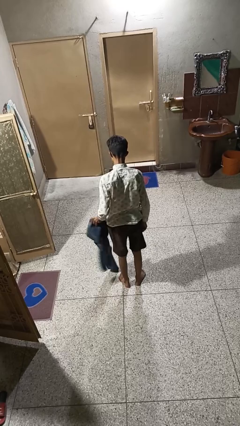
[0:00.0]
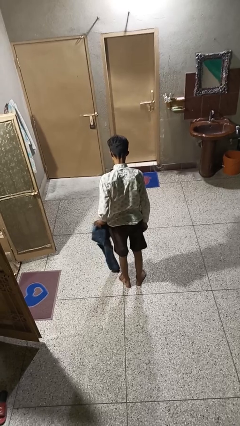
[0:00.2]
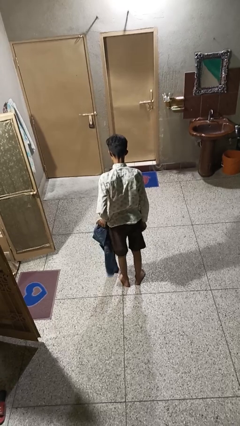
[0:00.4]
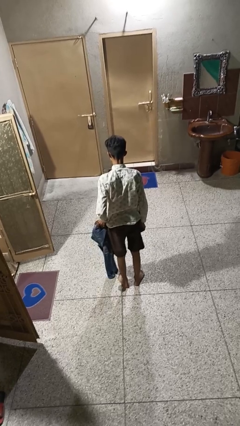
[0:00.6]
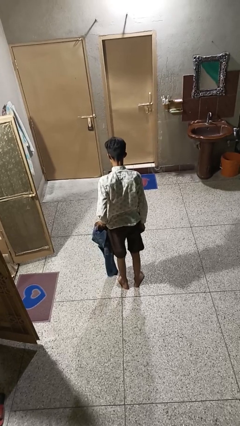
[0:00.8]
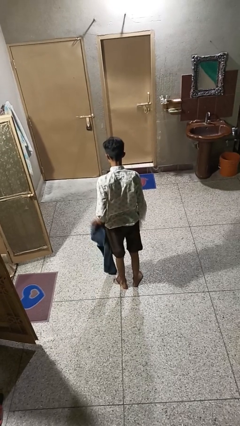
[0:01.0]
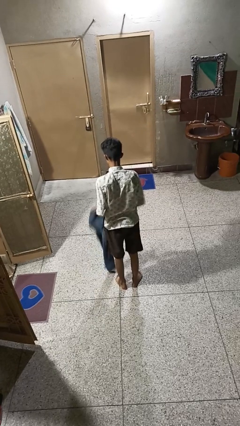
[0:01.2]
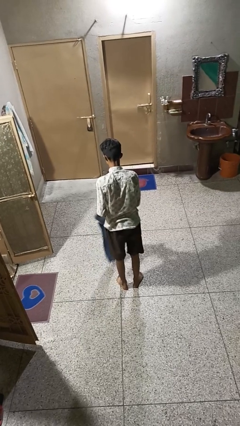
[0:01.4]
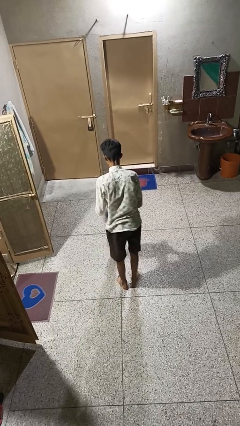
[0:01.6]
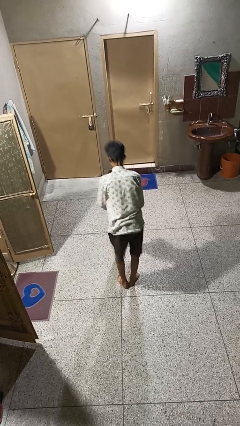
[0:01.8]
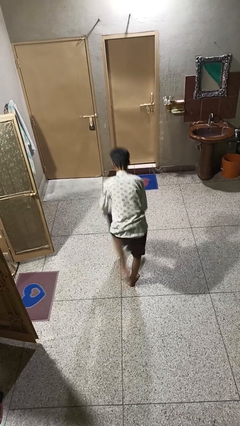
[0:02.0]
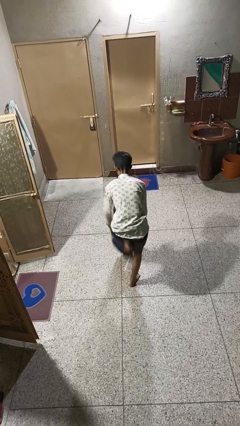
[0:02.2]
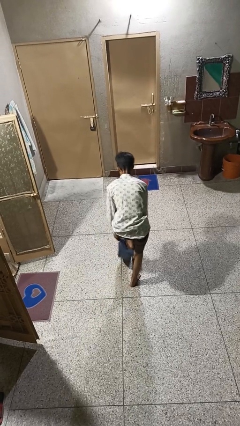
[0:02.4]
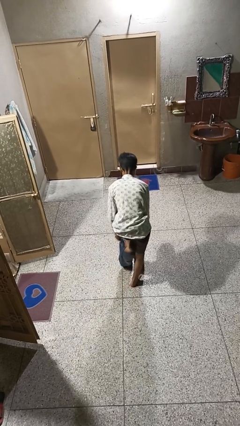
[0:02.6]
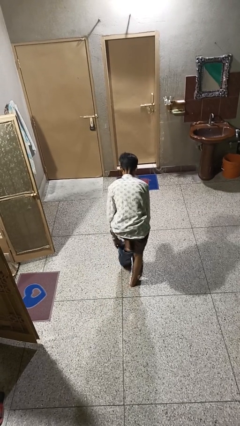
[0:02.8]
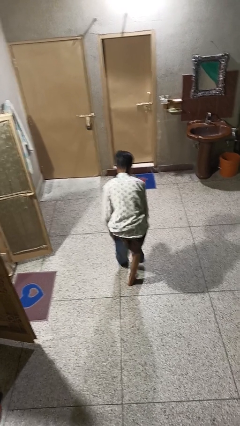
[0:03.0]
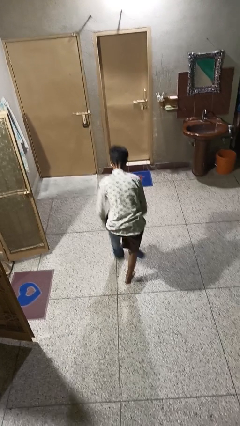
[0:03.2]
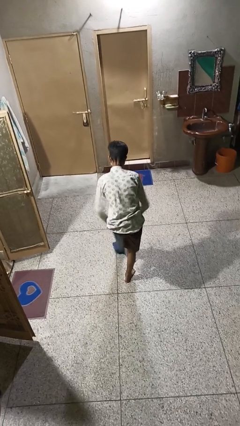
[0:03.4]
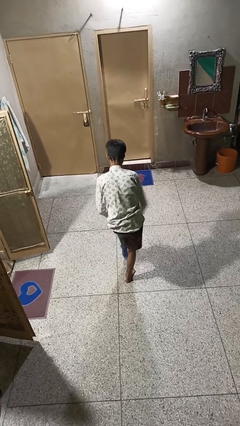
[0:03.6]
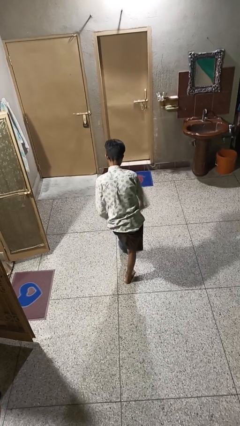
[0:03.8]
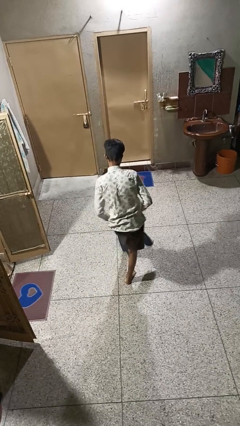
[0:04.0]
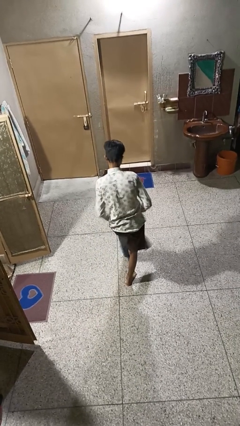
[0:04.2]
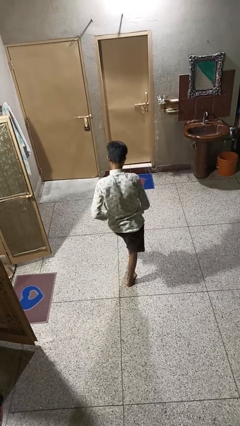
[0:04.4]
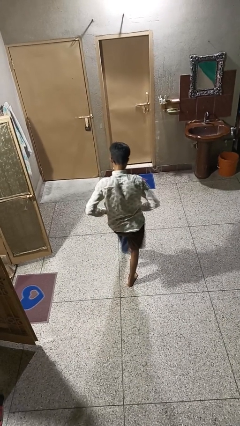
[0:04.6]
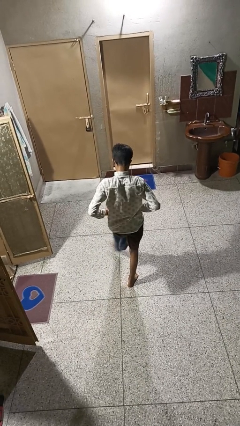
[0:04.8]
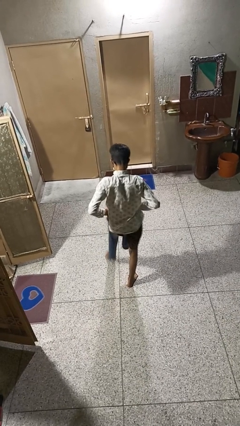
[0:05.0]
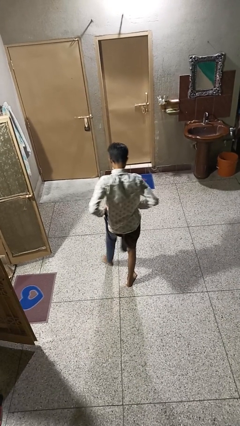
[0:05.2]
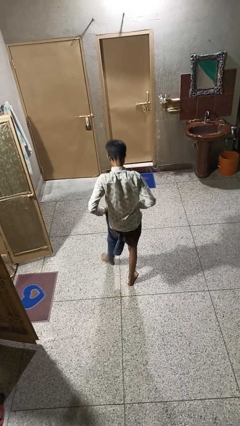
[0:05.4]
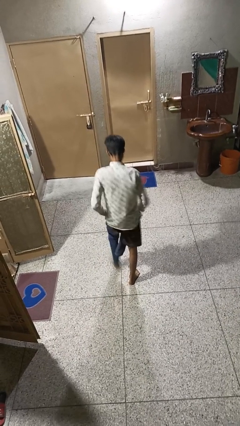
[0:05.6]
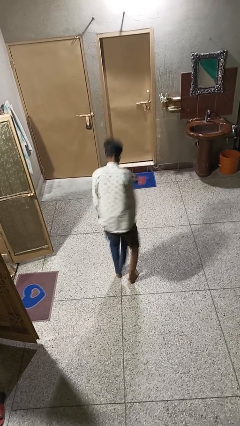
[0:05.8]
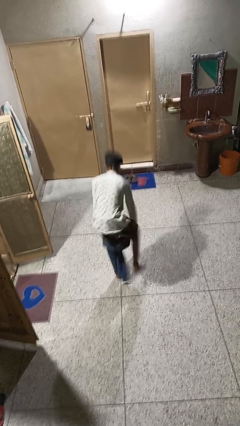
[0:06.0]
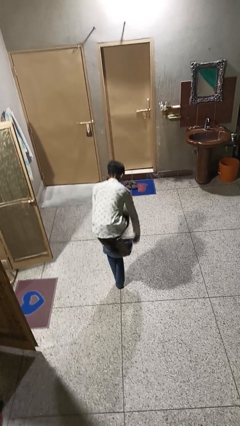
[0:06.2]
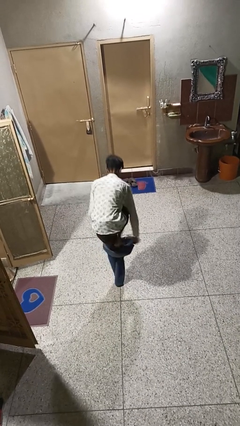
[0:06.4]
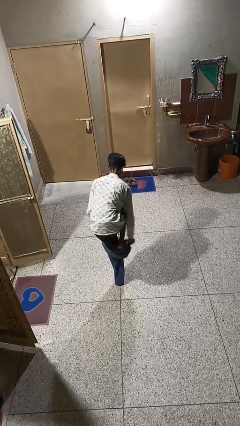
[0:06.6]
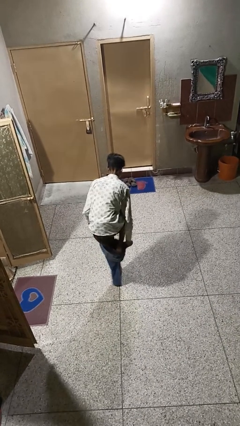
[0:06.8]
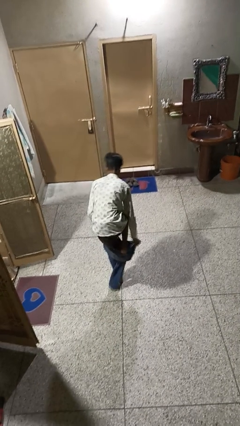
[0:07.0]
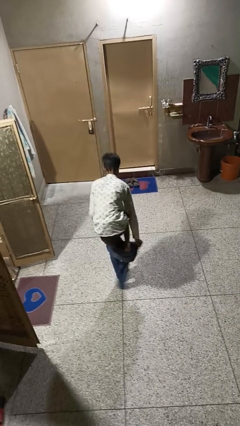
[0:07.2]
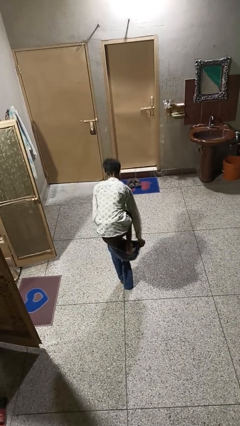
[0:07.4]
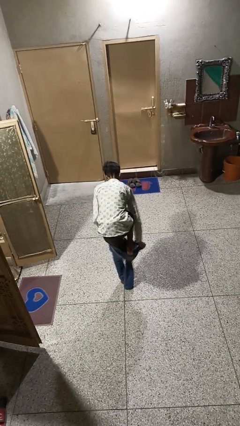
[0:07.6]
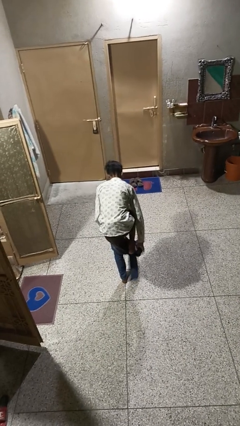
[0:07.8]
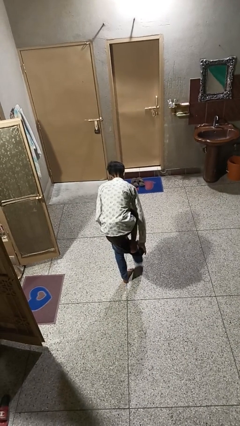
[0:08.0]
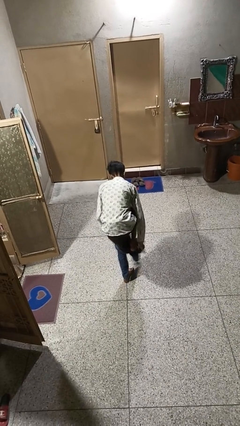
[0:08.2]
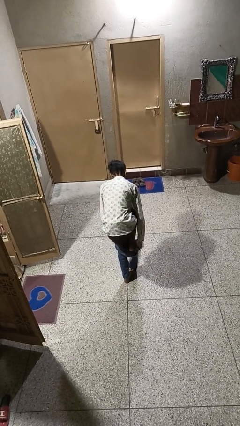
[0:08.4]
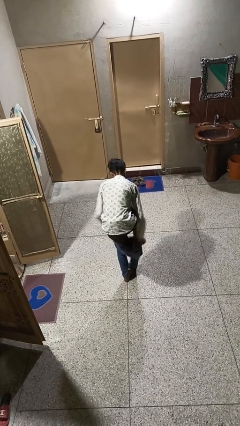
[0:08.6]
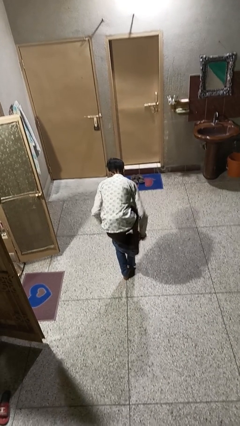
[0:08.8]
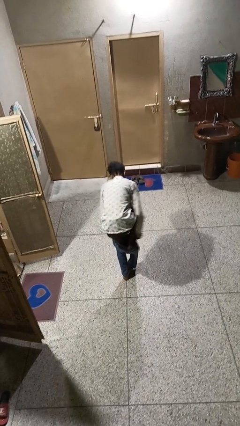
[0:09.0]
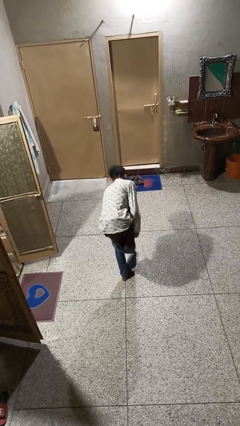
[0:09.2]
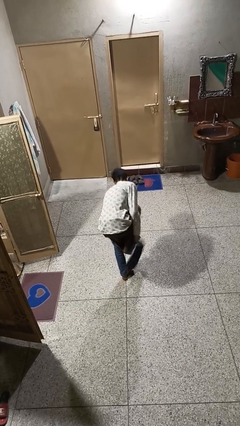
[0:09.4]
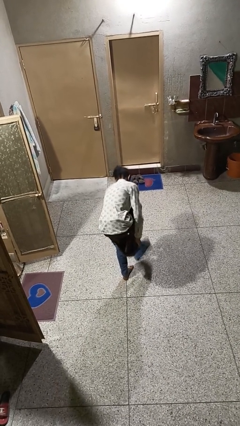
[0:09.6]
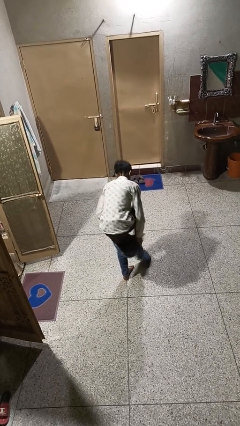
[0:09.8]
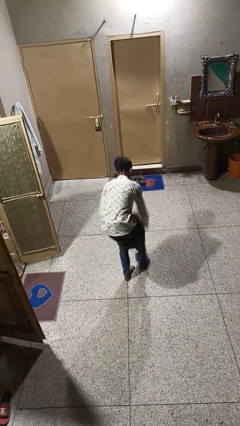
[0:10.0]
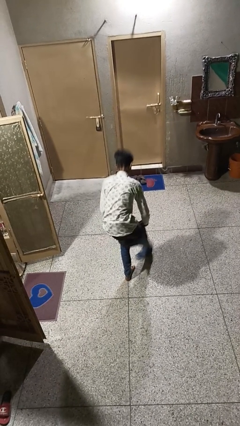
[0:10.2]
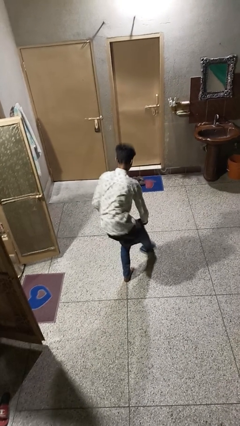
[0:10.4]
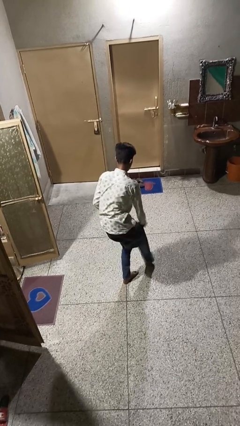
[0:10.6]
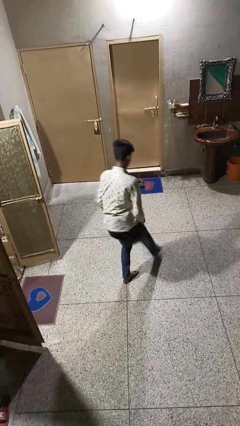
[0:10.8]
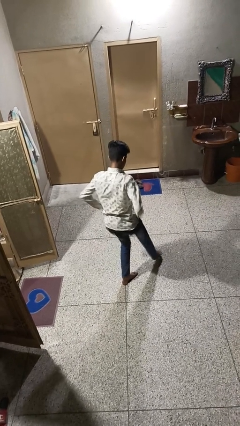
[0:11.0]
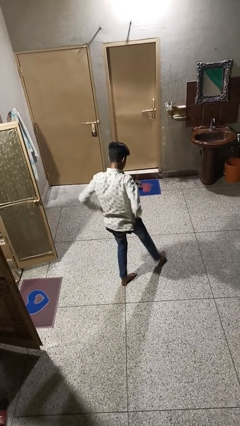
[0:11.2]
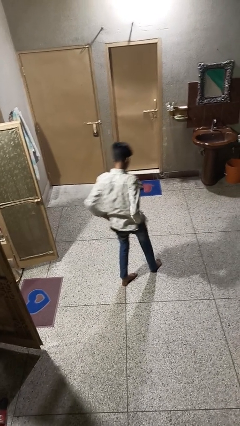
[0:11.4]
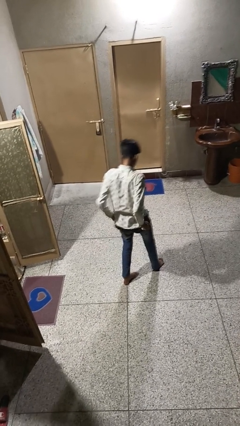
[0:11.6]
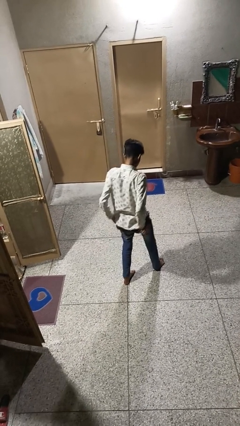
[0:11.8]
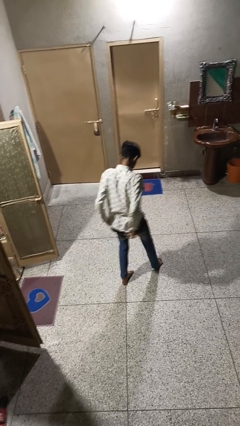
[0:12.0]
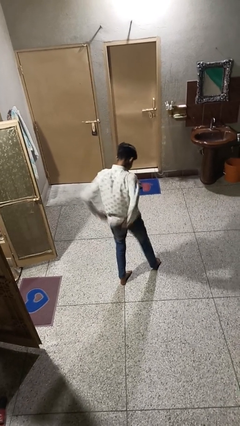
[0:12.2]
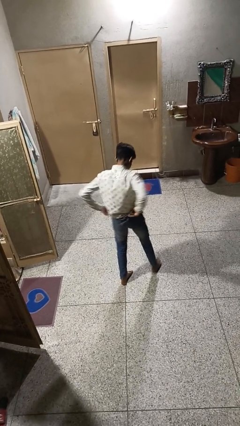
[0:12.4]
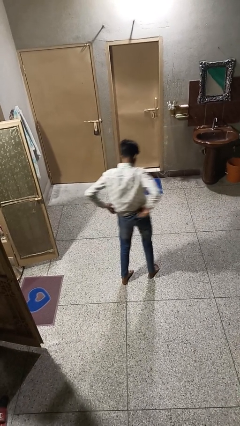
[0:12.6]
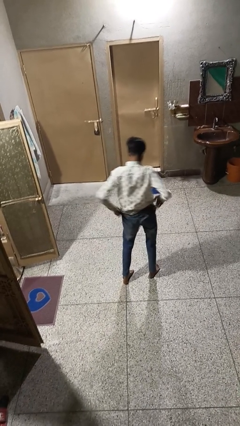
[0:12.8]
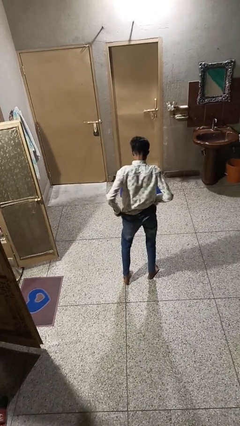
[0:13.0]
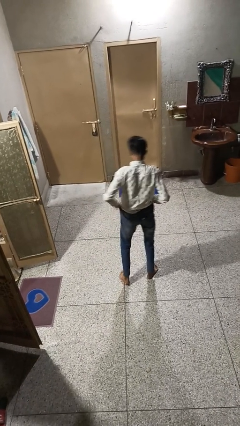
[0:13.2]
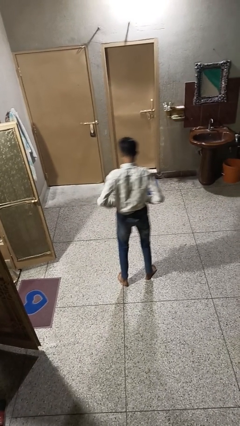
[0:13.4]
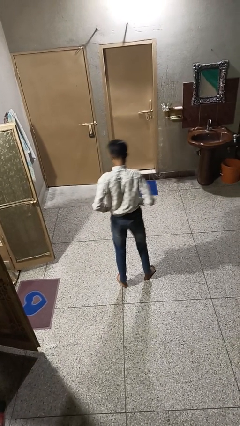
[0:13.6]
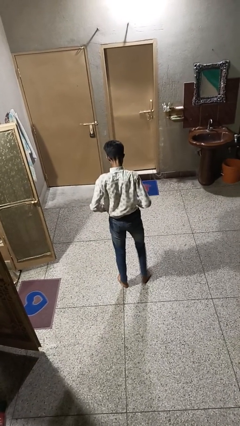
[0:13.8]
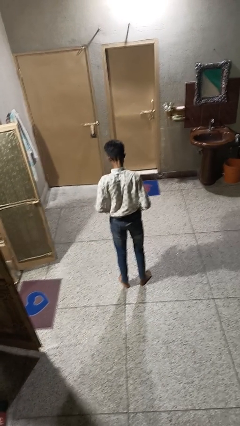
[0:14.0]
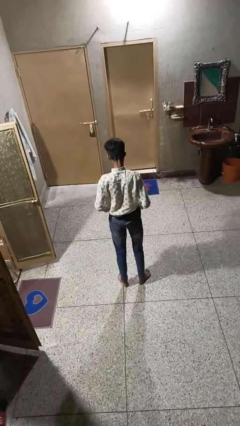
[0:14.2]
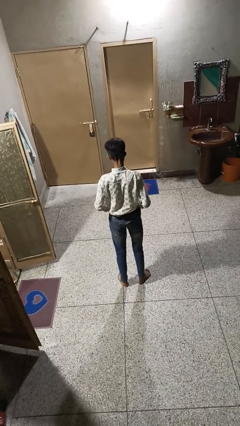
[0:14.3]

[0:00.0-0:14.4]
person puts on pants

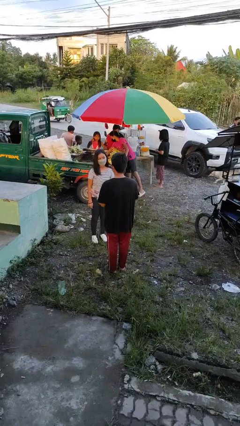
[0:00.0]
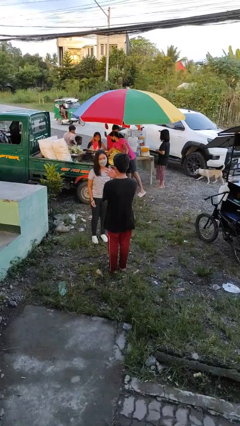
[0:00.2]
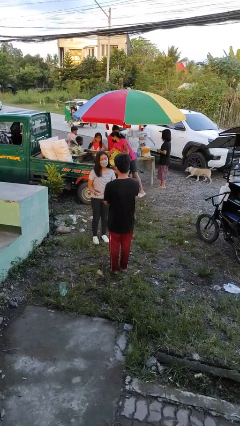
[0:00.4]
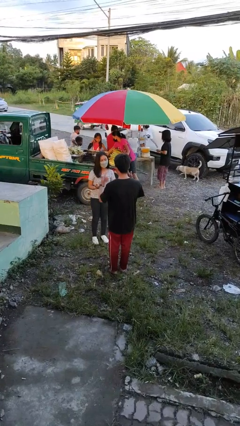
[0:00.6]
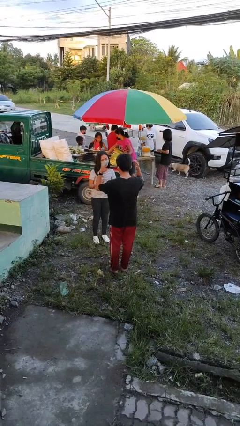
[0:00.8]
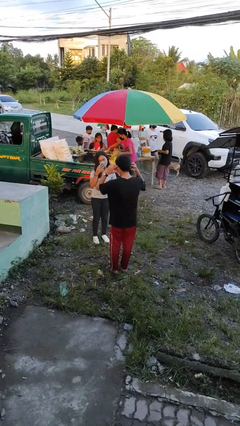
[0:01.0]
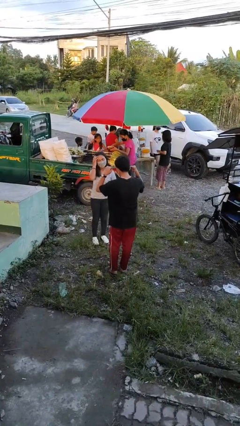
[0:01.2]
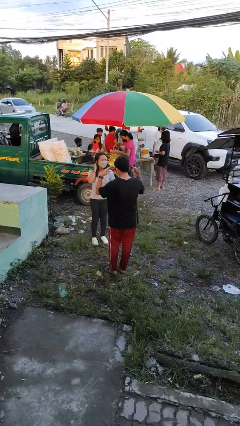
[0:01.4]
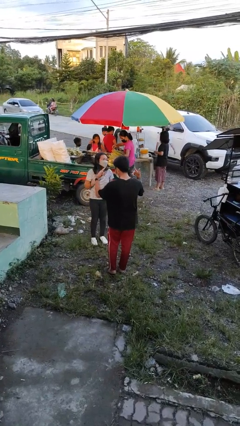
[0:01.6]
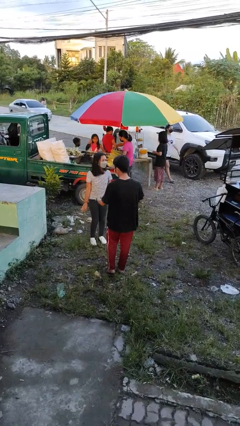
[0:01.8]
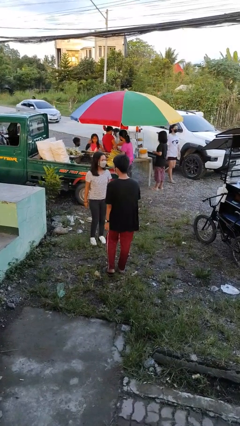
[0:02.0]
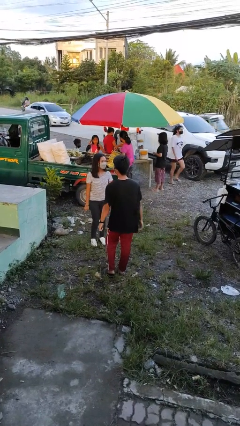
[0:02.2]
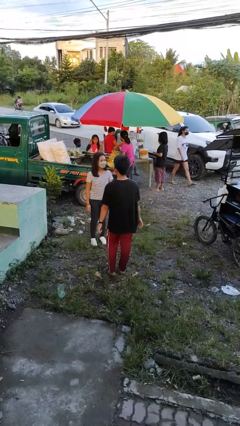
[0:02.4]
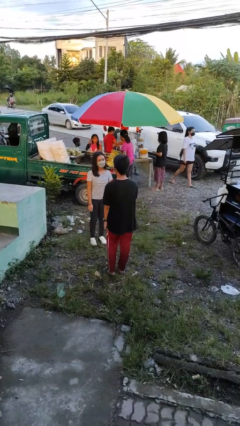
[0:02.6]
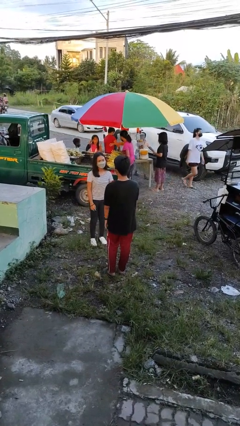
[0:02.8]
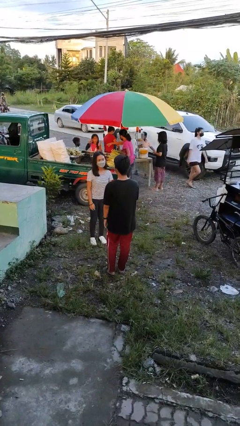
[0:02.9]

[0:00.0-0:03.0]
person talks to person

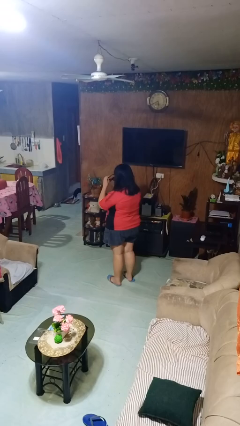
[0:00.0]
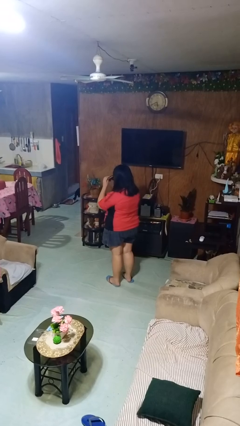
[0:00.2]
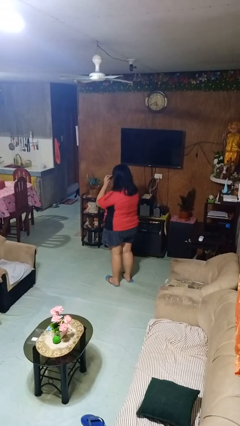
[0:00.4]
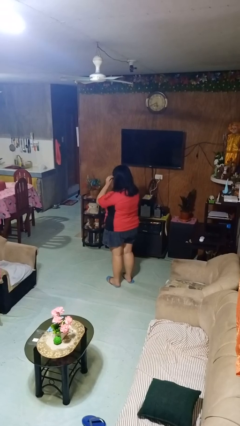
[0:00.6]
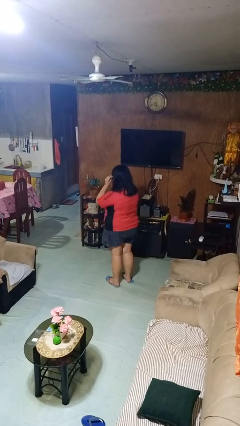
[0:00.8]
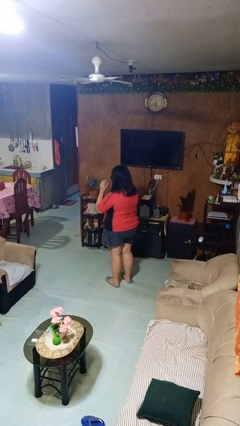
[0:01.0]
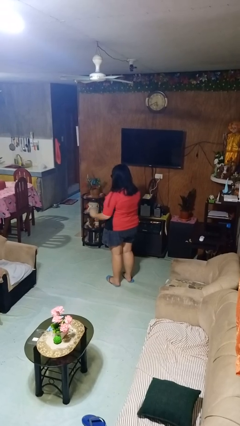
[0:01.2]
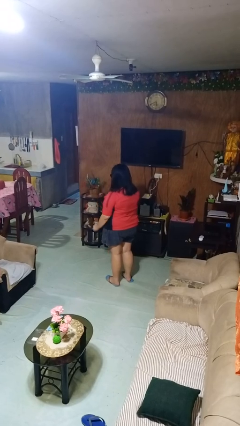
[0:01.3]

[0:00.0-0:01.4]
person puts on sunglasses
